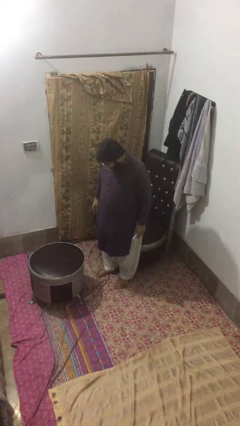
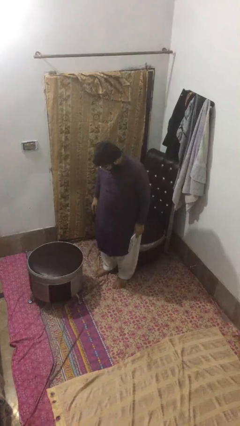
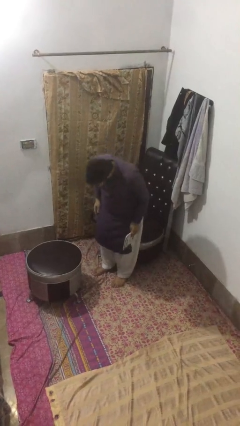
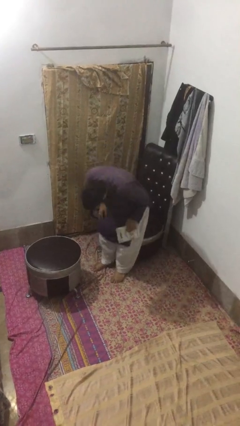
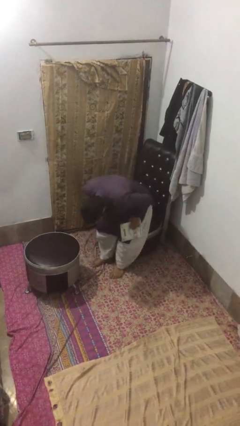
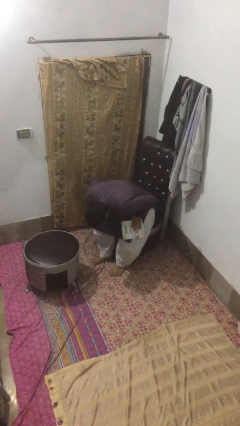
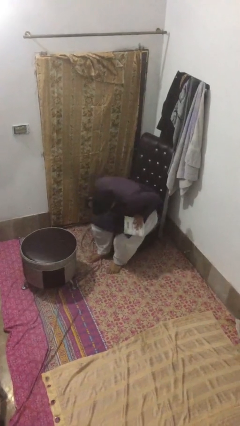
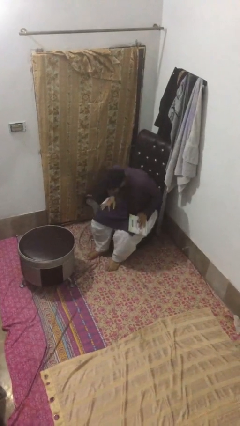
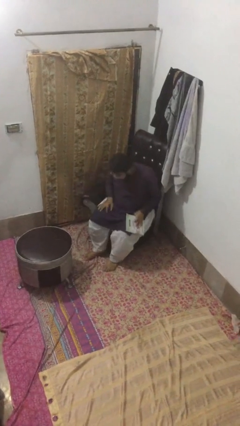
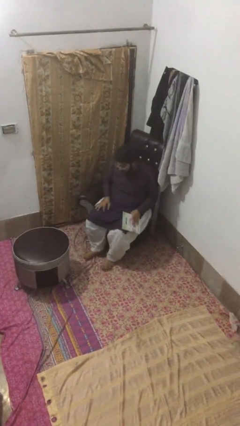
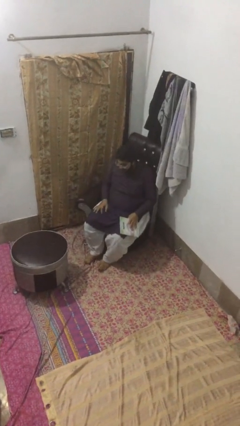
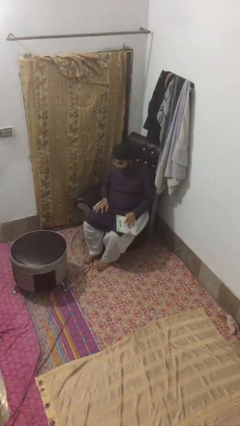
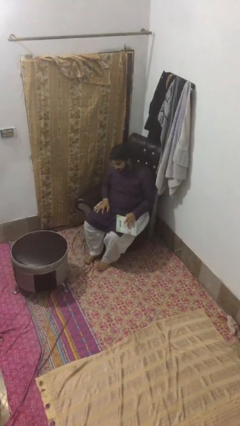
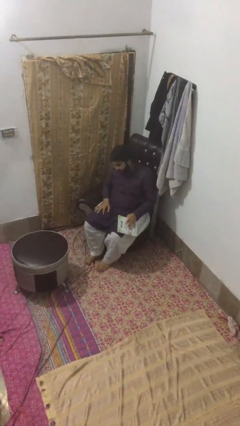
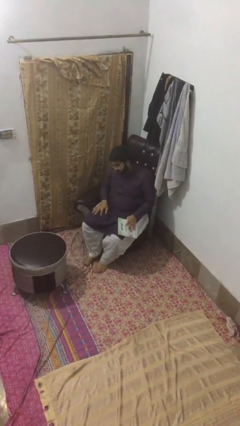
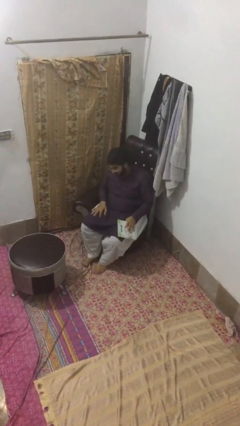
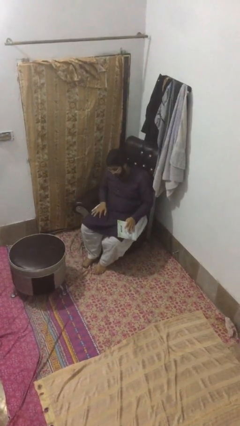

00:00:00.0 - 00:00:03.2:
person sits down

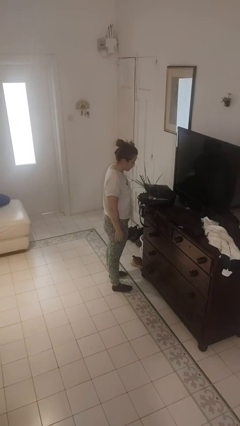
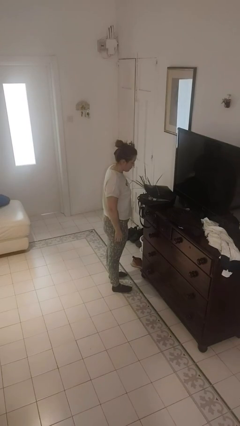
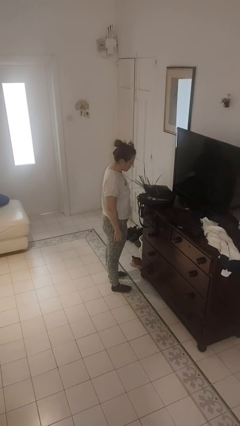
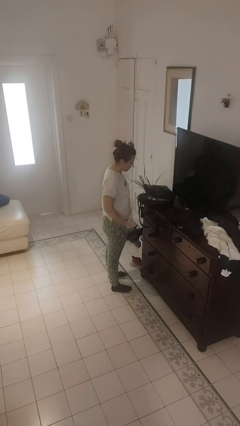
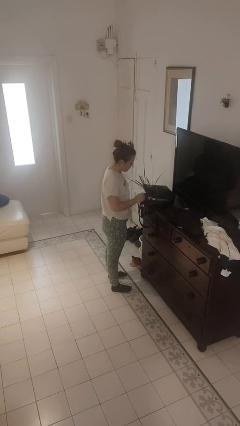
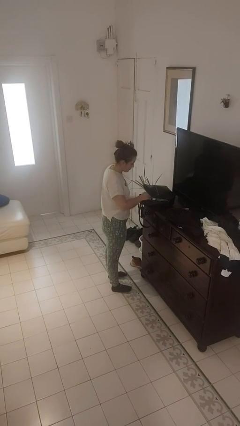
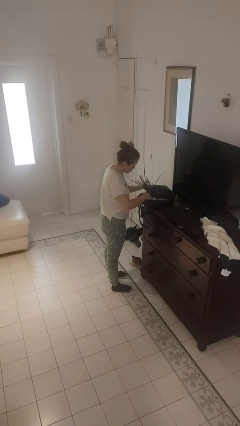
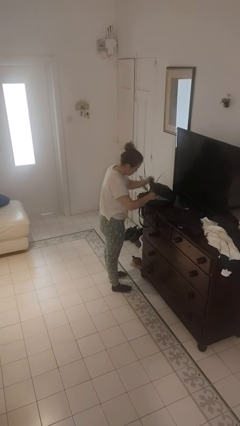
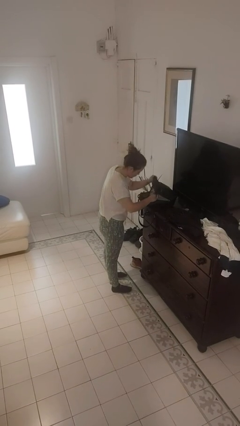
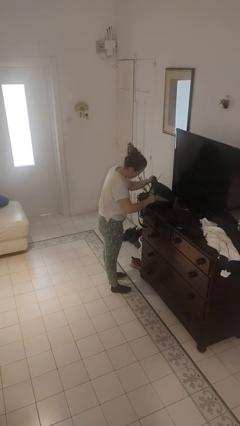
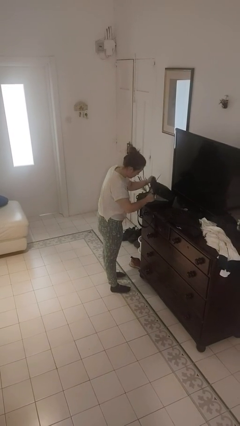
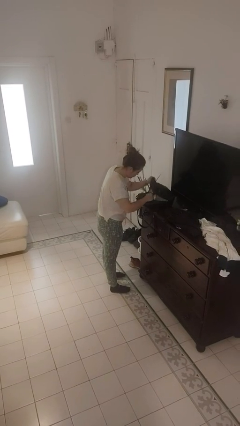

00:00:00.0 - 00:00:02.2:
person searches in purse

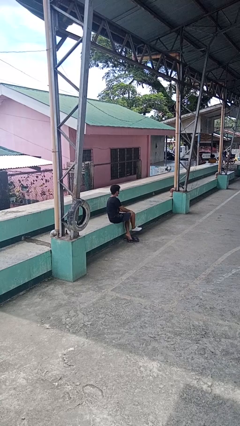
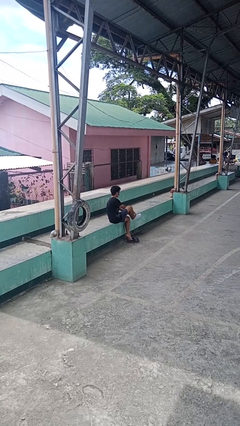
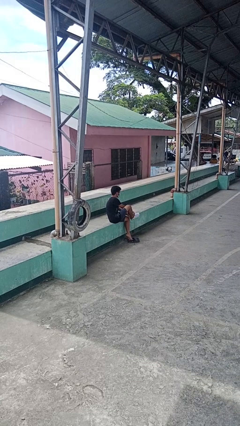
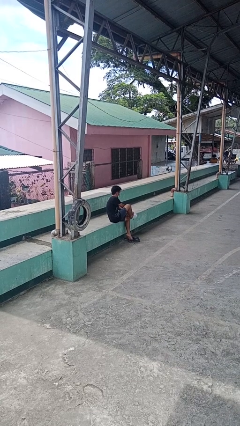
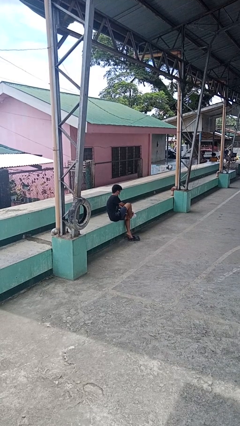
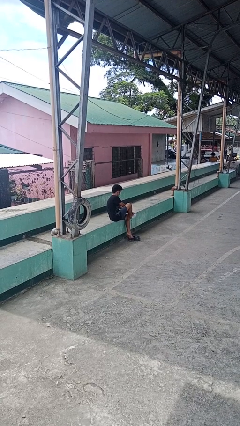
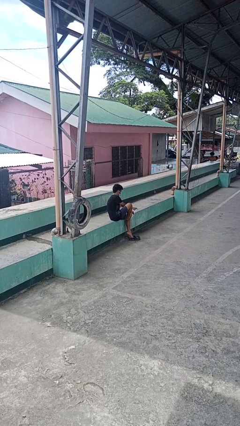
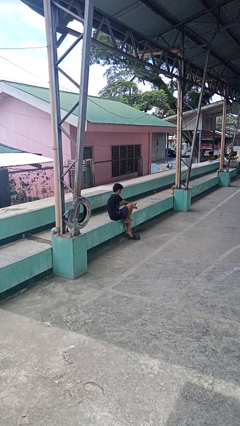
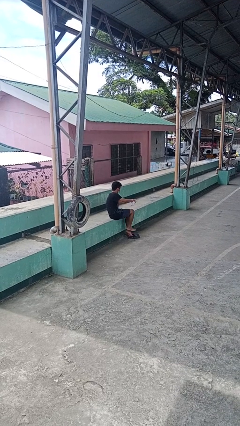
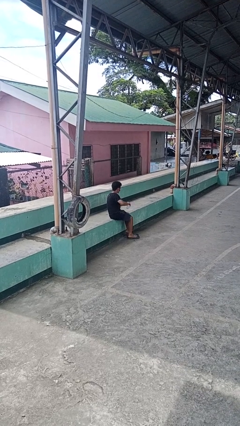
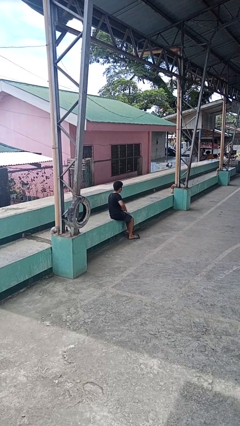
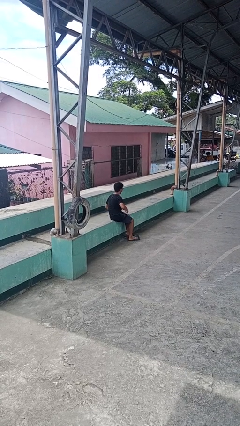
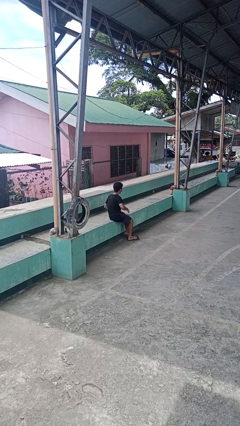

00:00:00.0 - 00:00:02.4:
person takes off socks

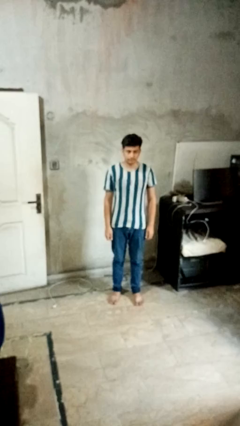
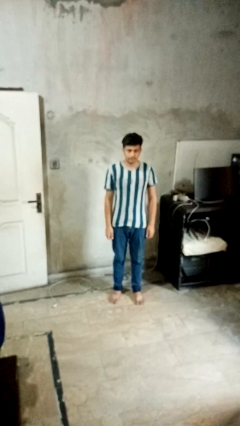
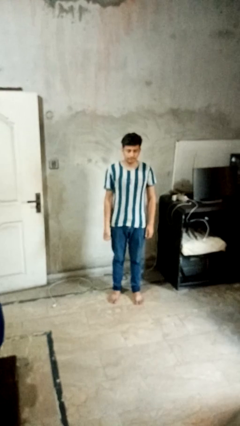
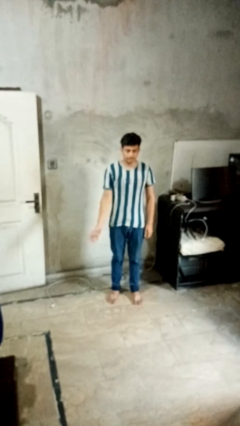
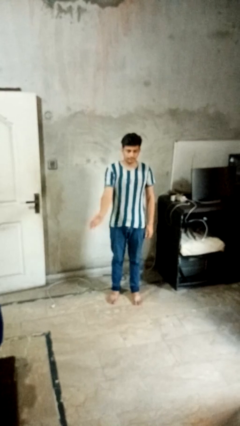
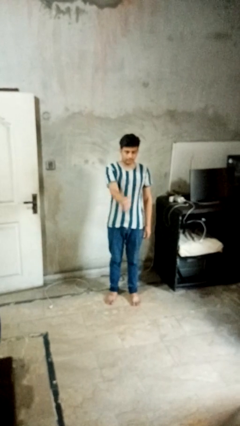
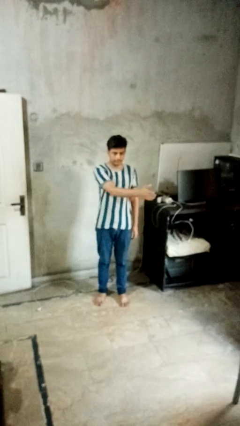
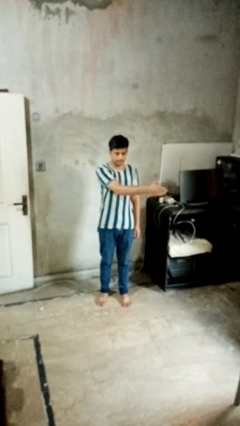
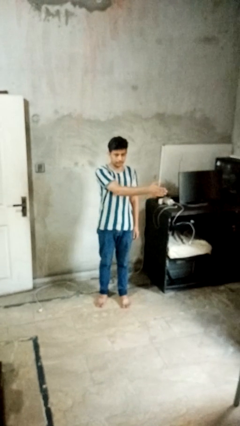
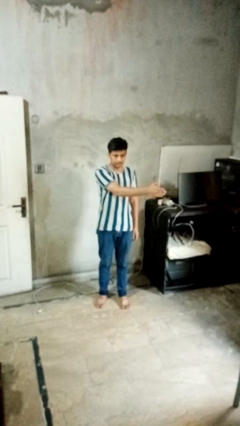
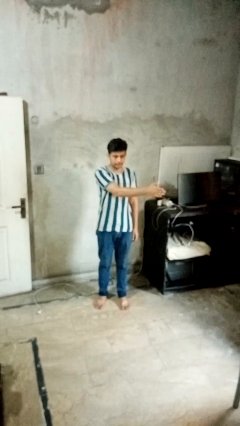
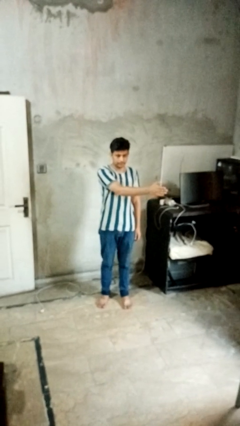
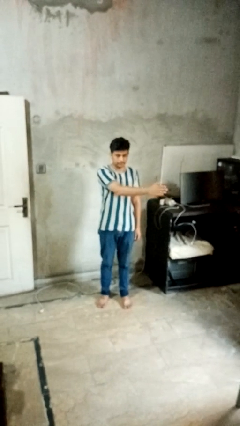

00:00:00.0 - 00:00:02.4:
person gestures swipe left

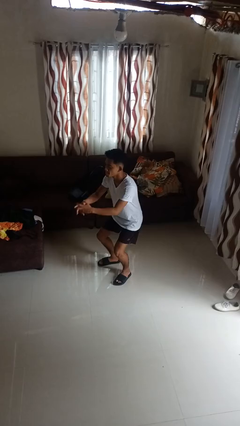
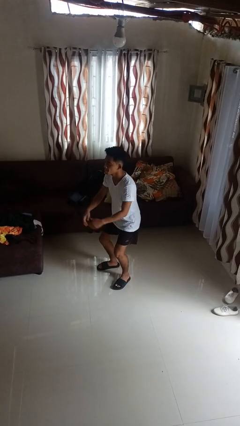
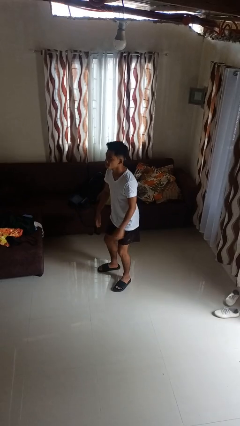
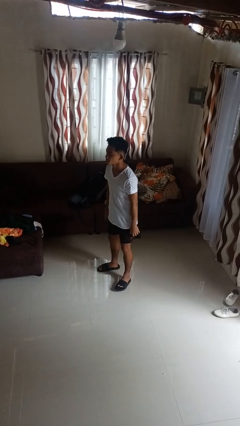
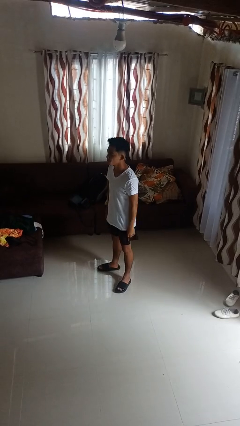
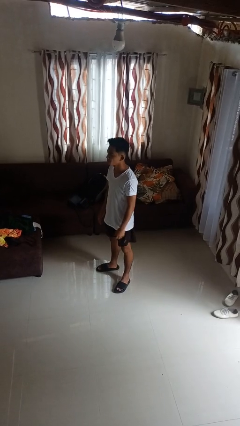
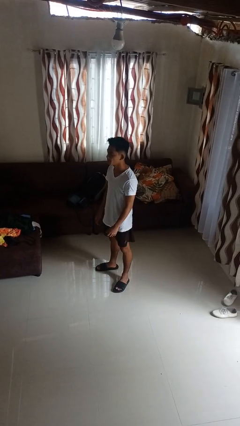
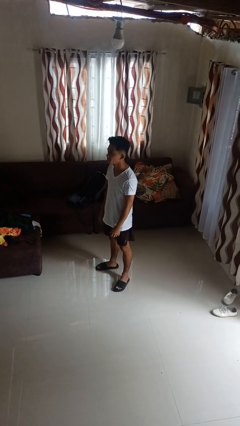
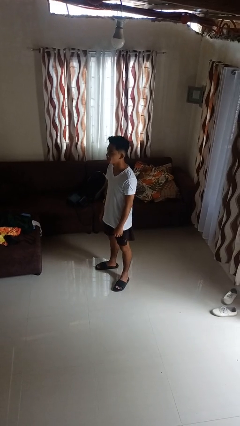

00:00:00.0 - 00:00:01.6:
person stands up

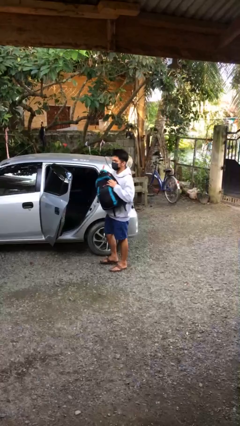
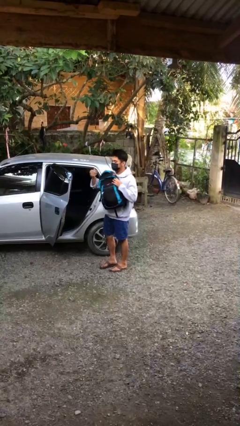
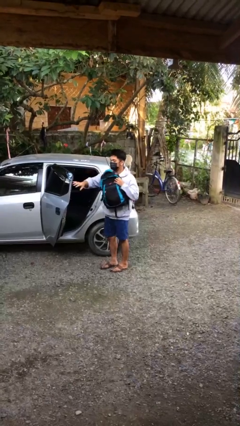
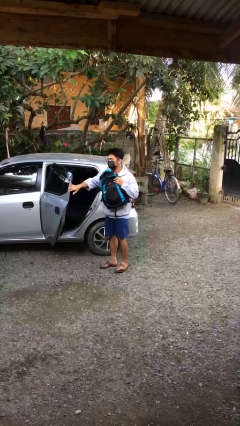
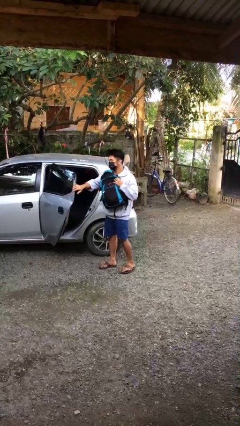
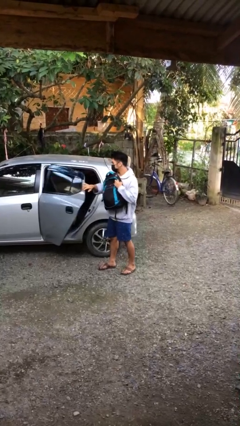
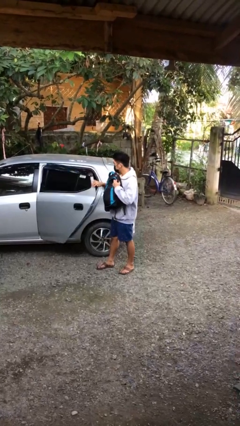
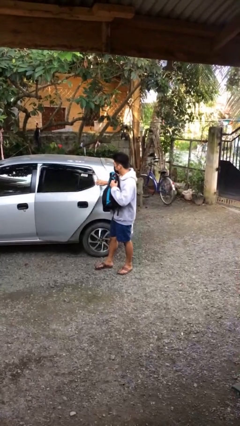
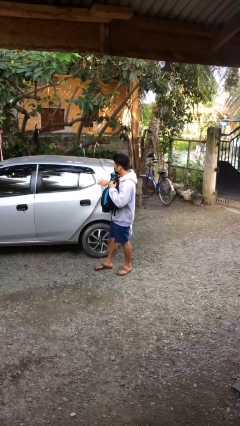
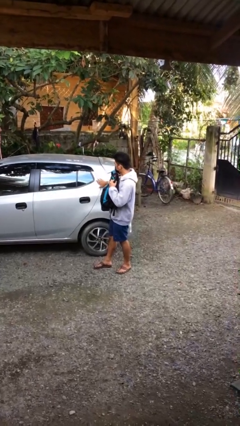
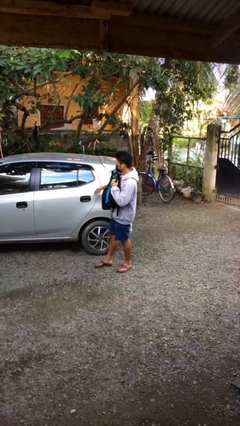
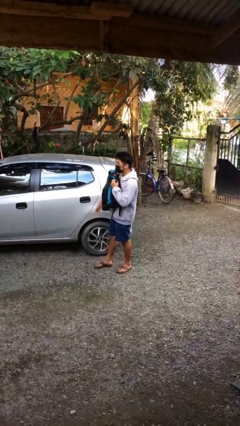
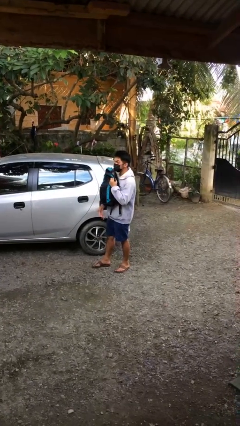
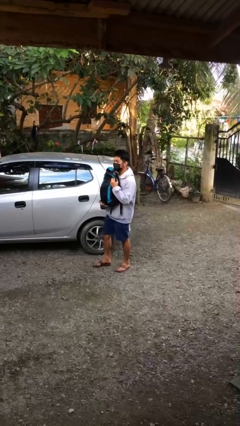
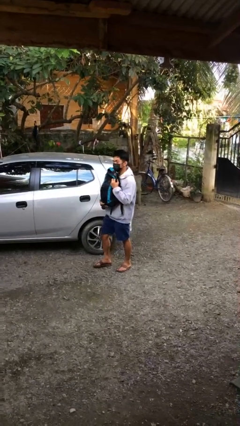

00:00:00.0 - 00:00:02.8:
person closes car door

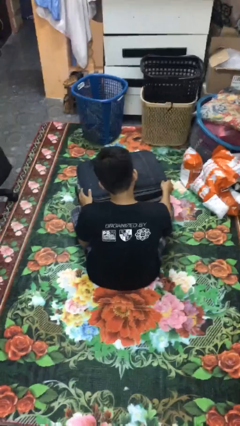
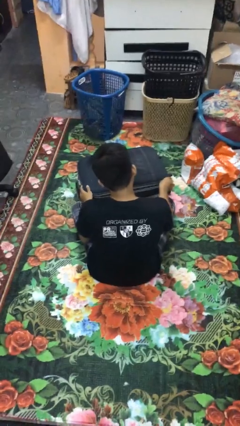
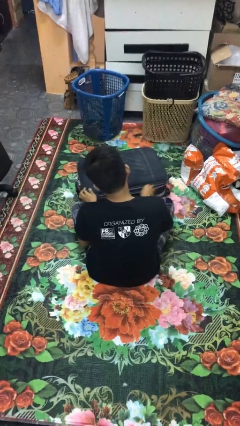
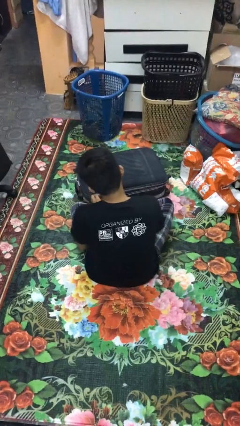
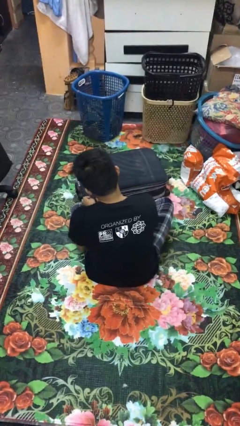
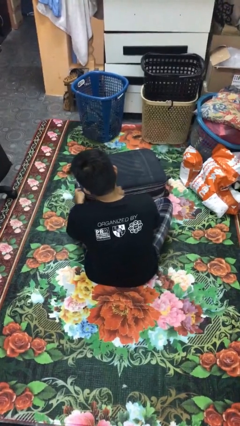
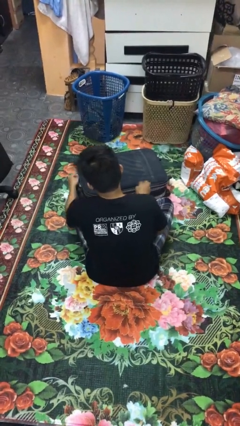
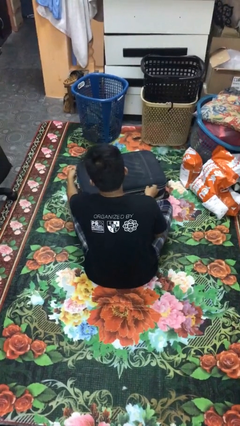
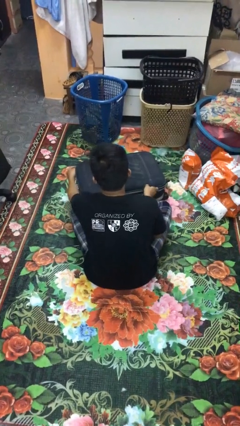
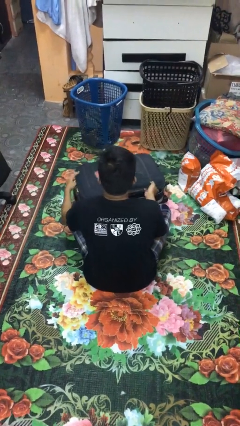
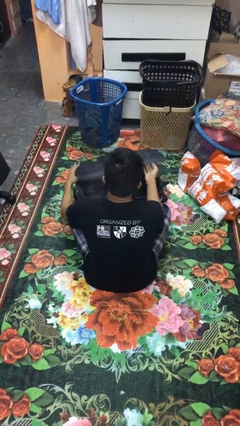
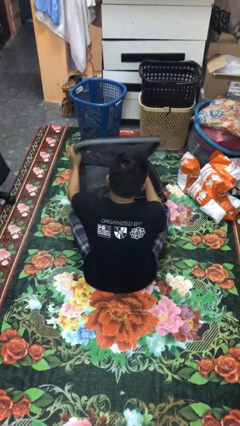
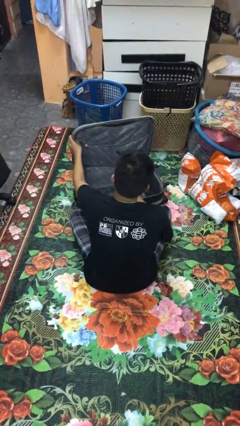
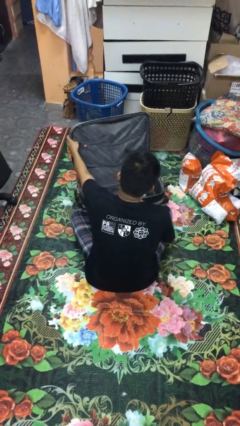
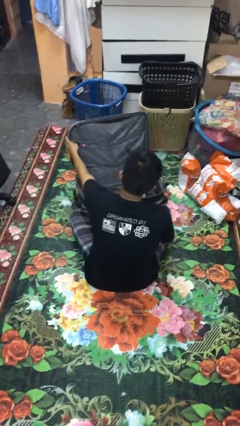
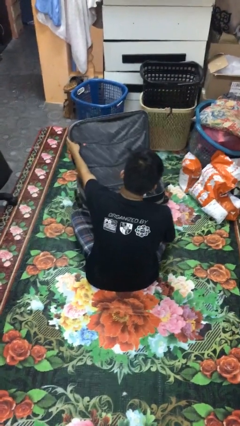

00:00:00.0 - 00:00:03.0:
person opens suitcase
